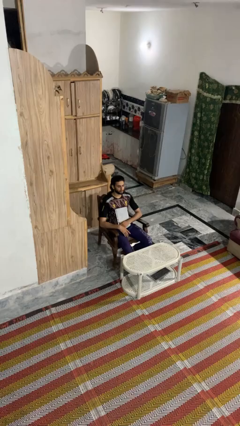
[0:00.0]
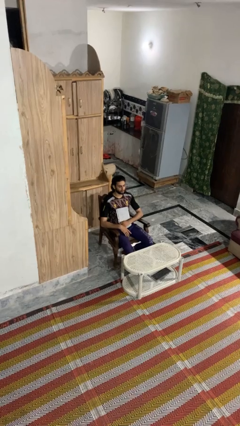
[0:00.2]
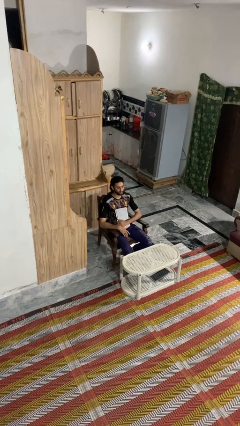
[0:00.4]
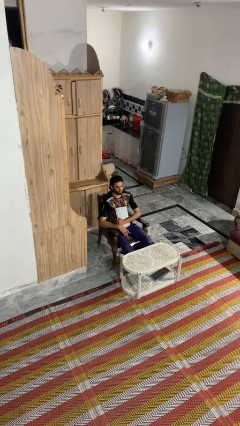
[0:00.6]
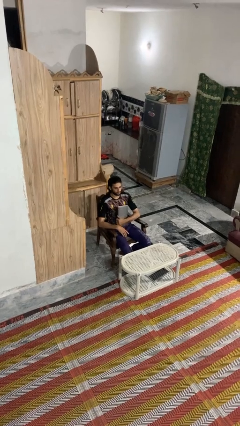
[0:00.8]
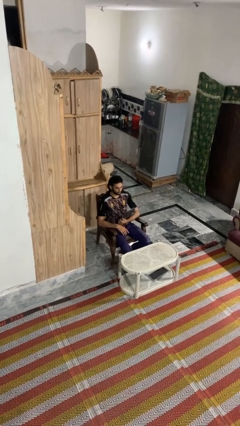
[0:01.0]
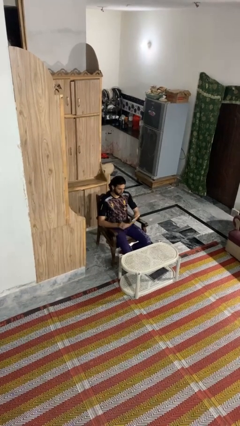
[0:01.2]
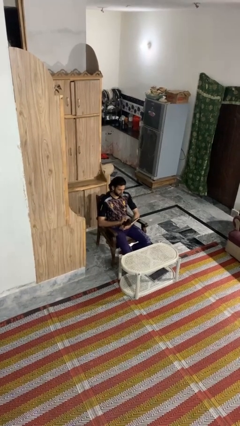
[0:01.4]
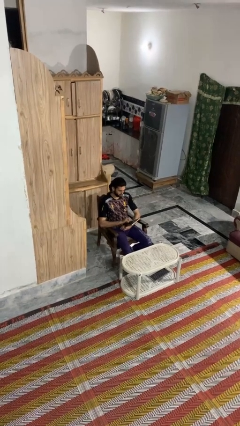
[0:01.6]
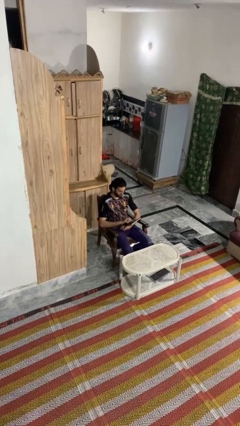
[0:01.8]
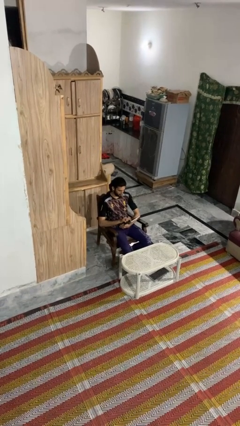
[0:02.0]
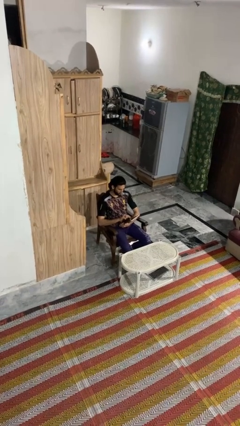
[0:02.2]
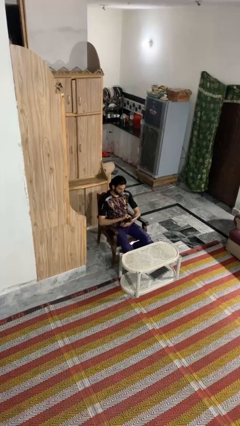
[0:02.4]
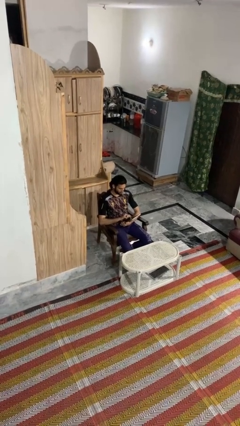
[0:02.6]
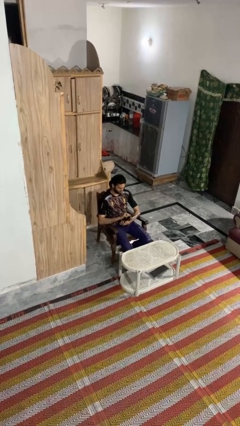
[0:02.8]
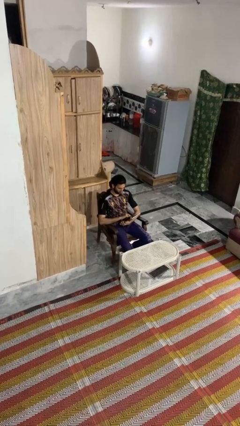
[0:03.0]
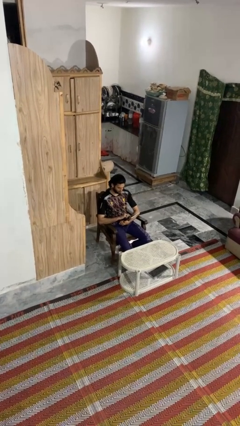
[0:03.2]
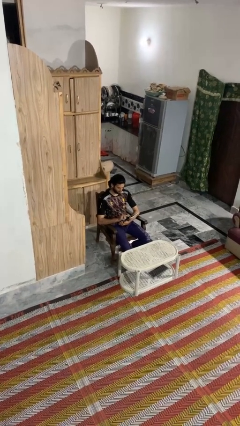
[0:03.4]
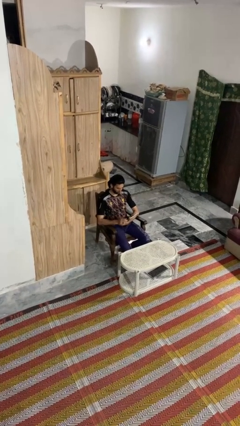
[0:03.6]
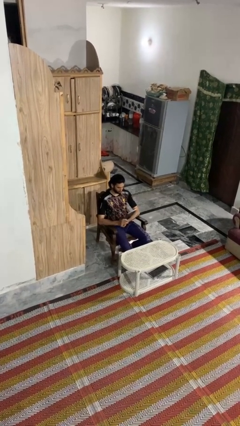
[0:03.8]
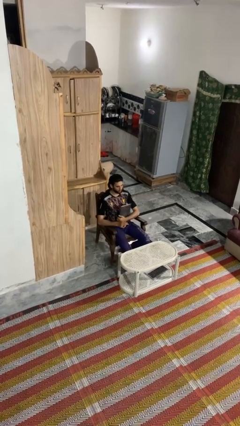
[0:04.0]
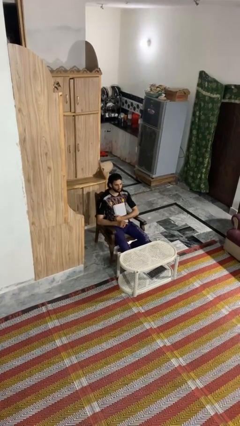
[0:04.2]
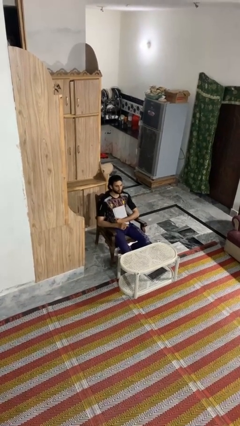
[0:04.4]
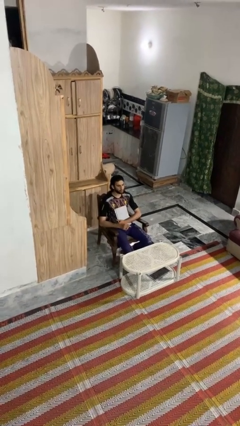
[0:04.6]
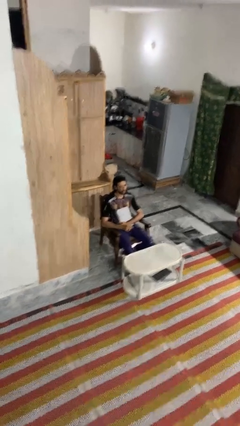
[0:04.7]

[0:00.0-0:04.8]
person interacts with tablet

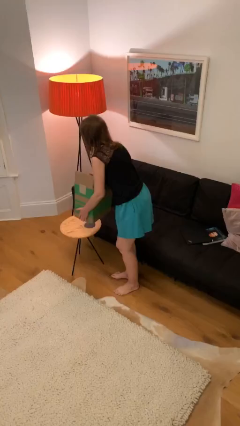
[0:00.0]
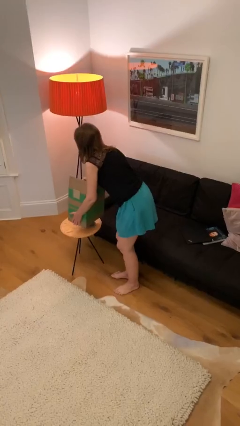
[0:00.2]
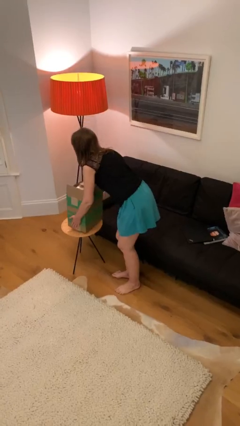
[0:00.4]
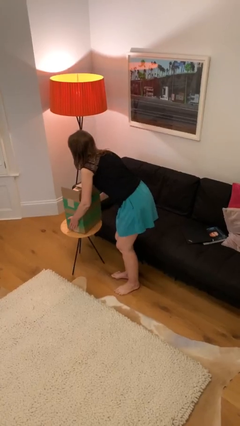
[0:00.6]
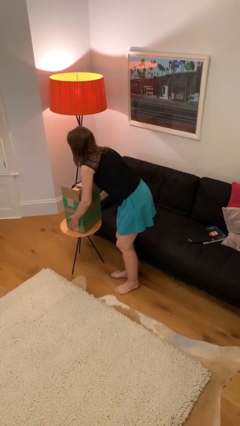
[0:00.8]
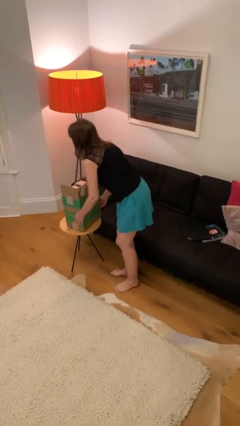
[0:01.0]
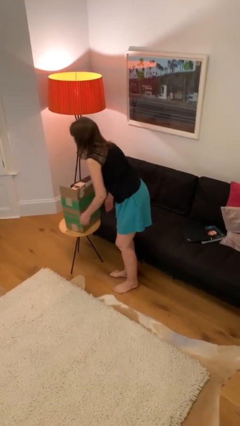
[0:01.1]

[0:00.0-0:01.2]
person puts down object on table

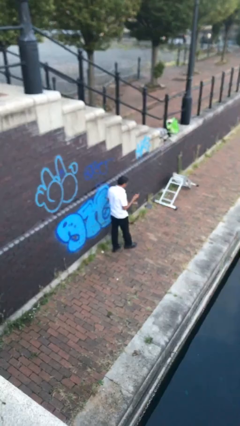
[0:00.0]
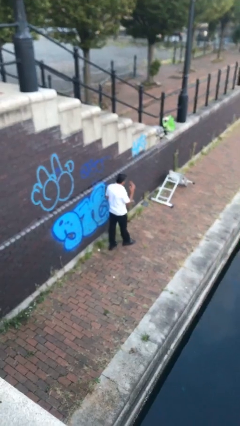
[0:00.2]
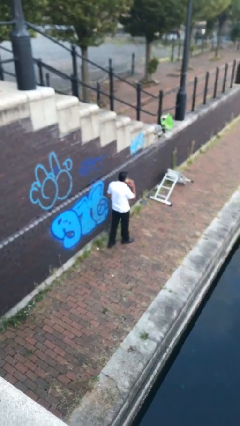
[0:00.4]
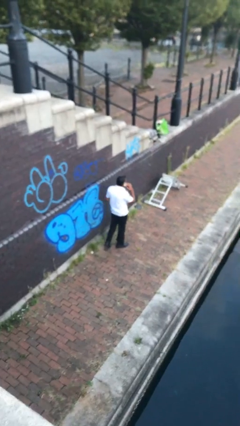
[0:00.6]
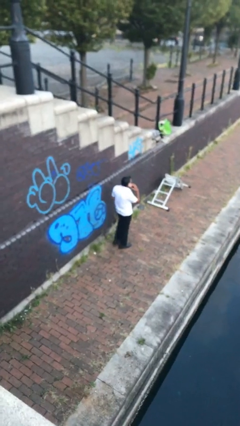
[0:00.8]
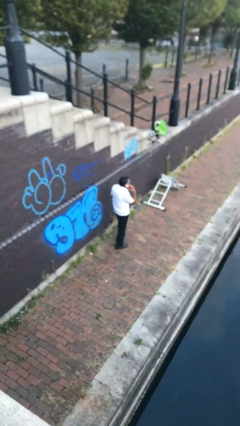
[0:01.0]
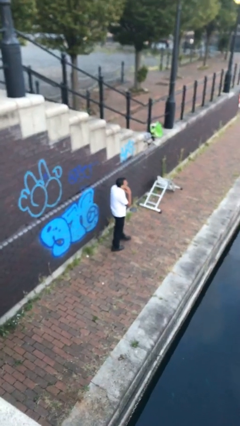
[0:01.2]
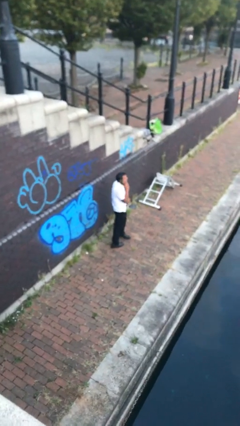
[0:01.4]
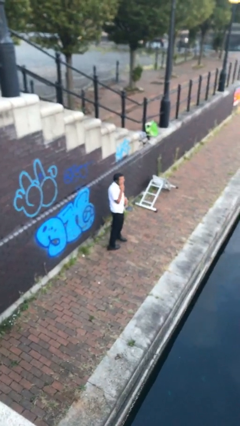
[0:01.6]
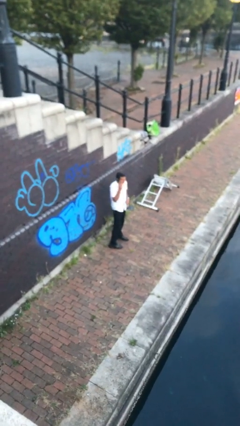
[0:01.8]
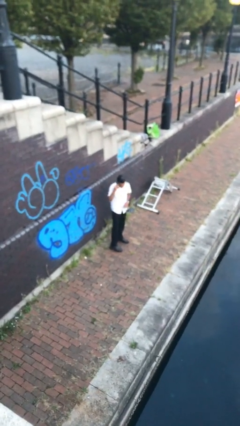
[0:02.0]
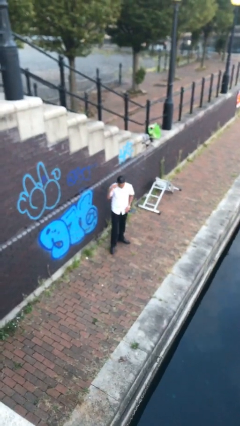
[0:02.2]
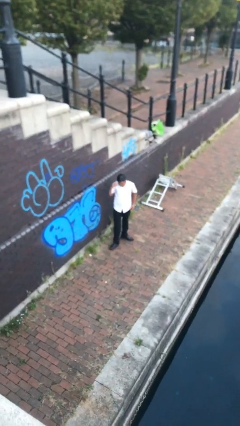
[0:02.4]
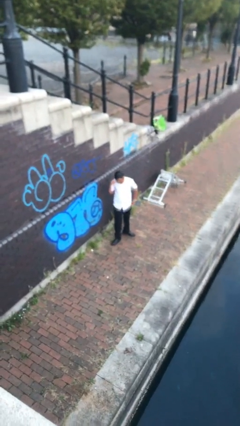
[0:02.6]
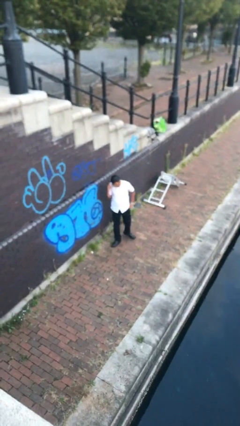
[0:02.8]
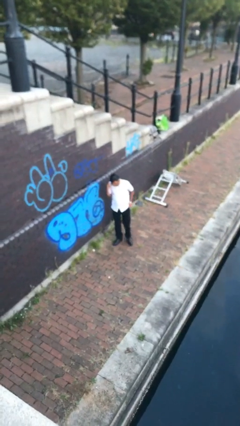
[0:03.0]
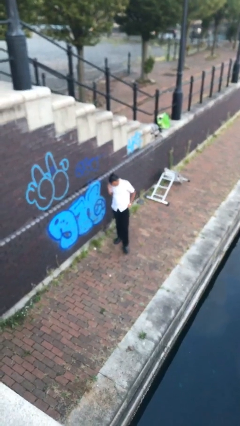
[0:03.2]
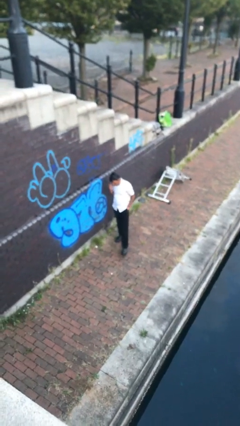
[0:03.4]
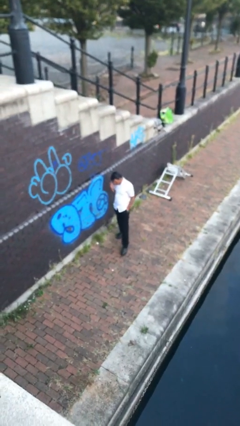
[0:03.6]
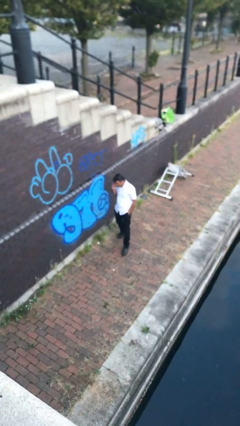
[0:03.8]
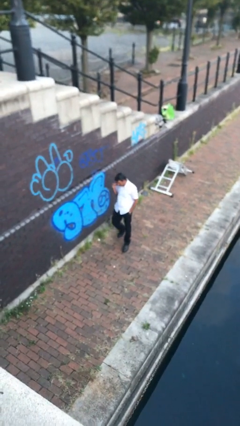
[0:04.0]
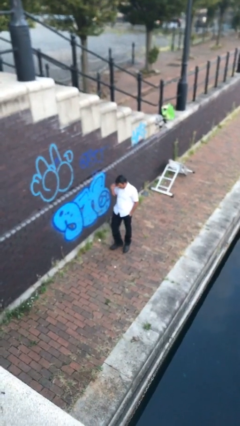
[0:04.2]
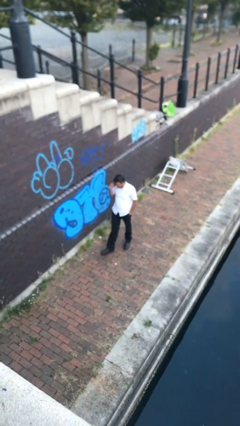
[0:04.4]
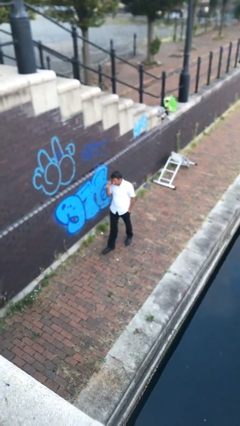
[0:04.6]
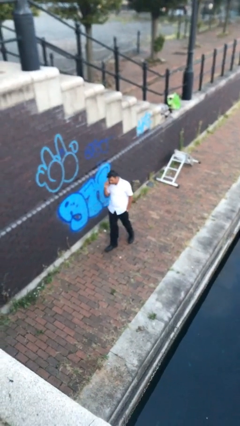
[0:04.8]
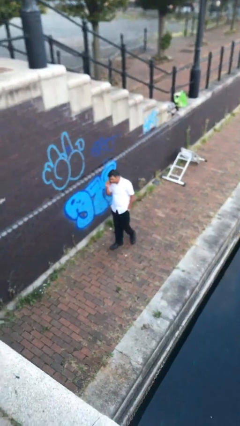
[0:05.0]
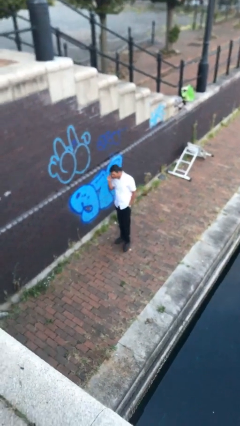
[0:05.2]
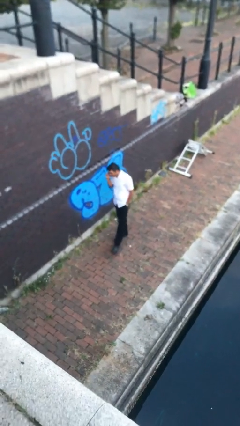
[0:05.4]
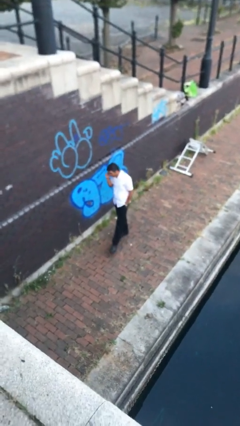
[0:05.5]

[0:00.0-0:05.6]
person talks on phone

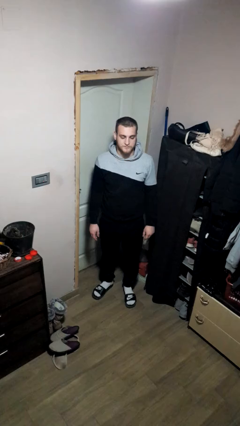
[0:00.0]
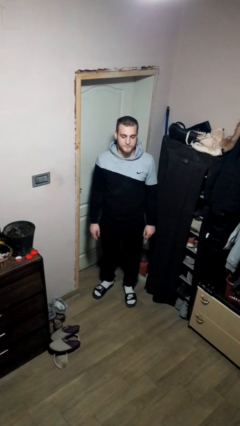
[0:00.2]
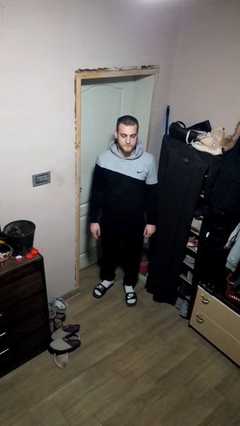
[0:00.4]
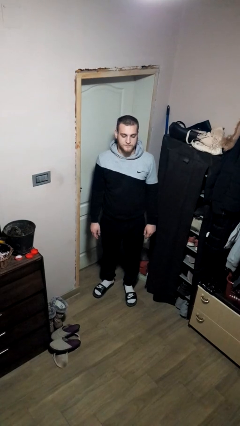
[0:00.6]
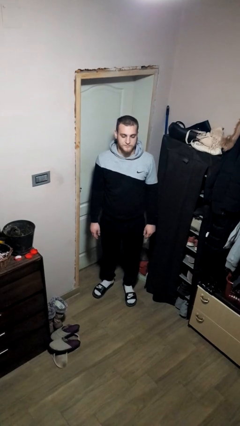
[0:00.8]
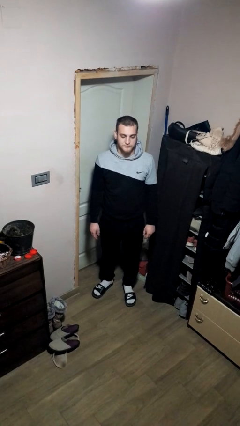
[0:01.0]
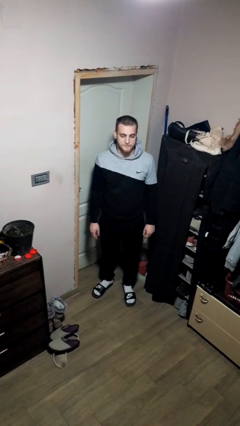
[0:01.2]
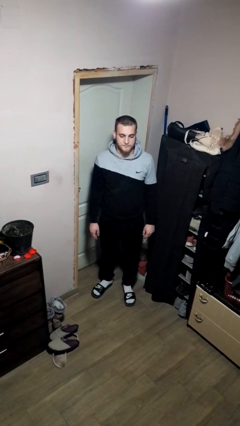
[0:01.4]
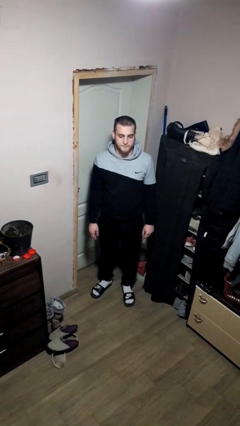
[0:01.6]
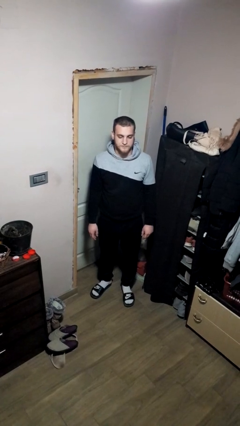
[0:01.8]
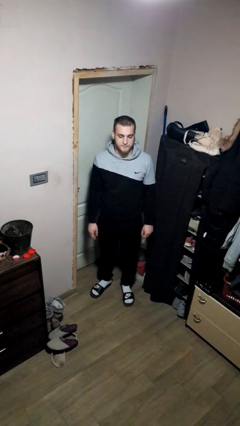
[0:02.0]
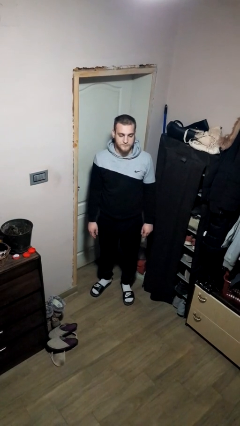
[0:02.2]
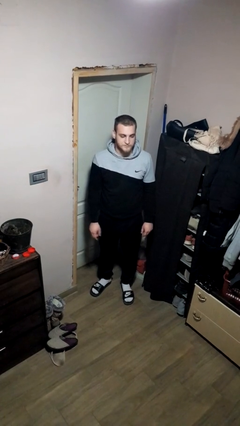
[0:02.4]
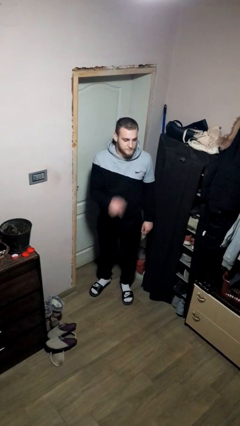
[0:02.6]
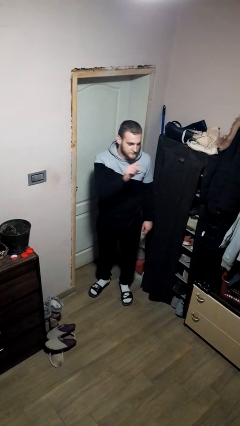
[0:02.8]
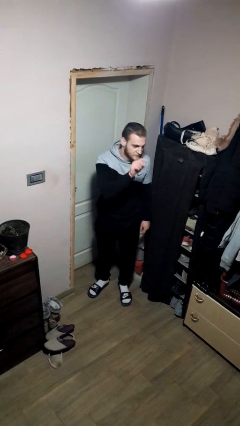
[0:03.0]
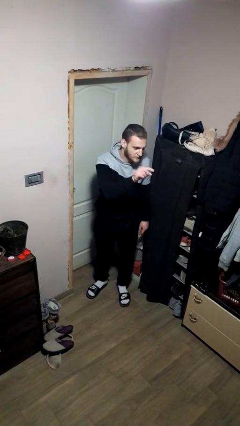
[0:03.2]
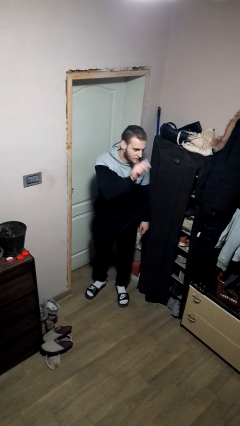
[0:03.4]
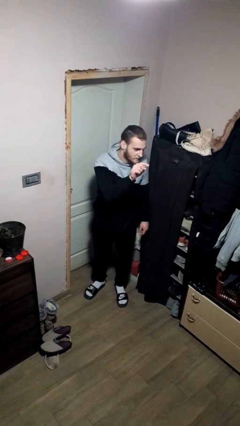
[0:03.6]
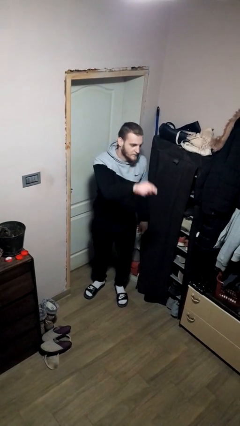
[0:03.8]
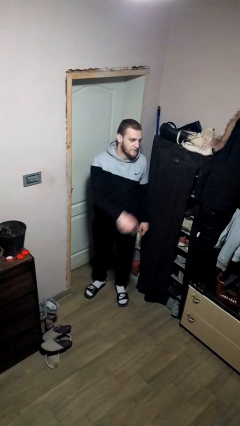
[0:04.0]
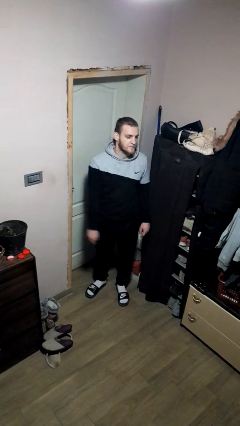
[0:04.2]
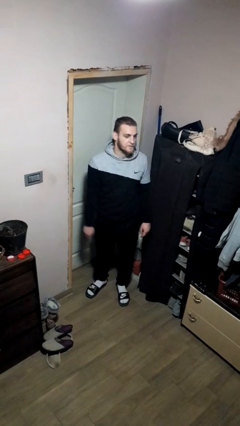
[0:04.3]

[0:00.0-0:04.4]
person points at person

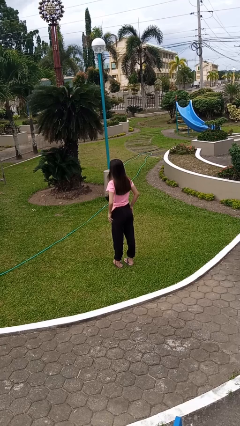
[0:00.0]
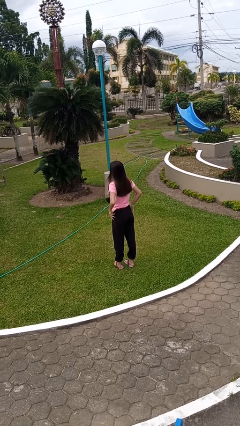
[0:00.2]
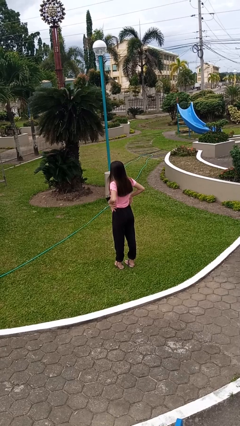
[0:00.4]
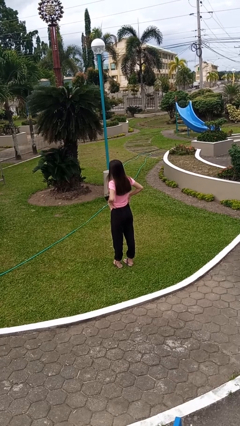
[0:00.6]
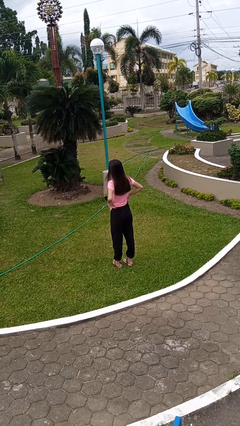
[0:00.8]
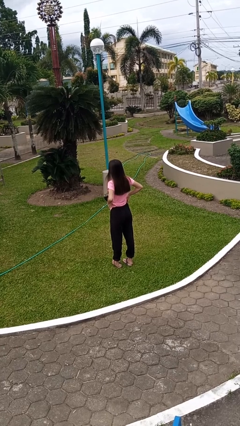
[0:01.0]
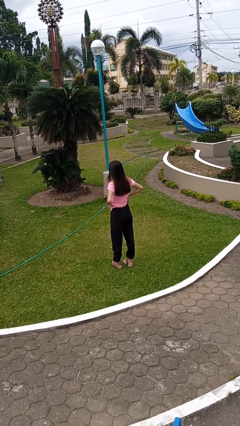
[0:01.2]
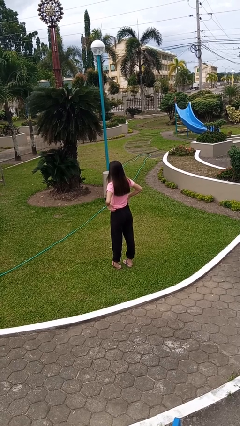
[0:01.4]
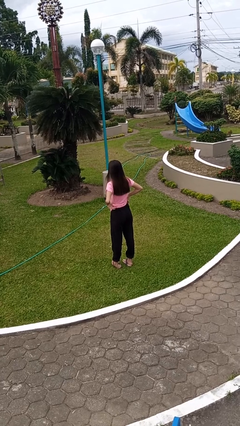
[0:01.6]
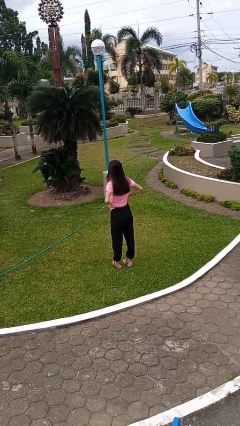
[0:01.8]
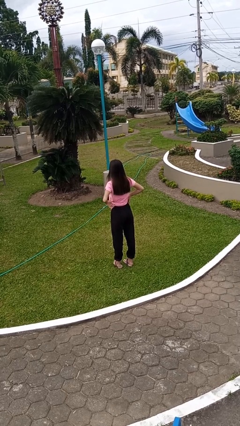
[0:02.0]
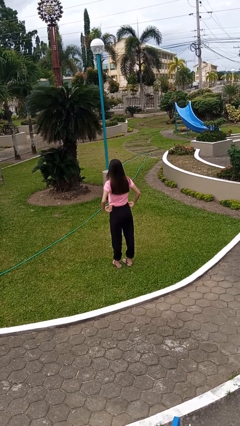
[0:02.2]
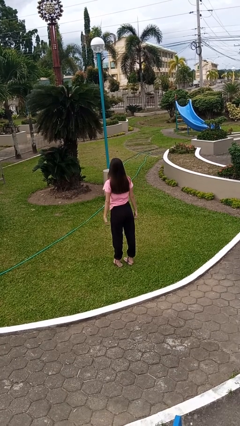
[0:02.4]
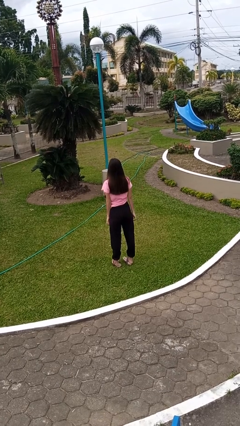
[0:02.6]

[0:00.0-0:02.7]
person hikes up pants
